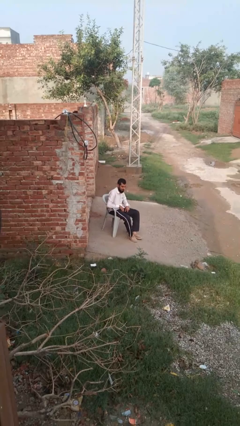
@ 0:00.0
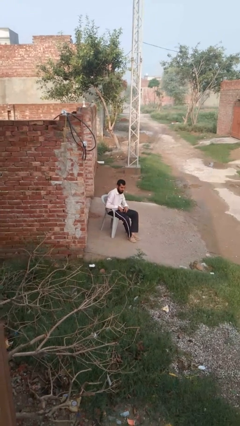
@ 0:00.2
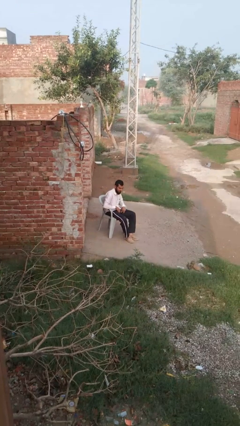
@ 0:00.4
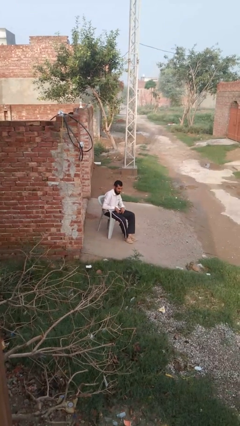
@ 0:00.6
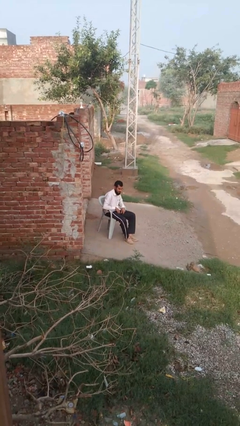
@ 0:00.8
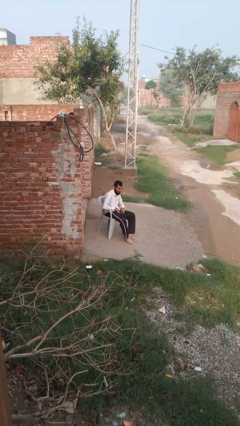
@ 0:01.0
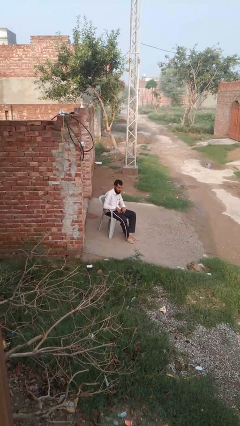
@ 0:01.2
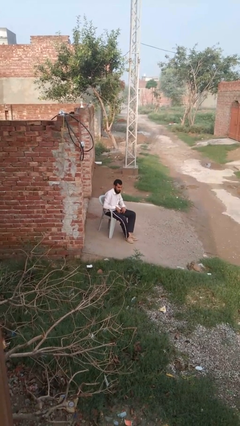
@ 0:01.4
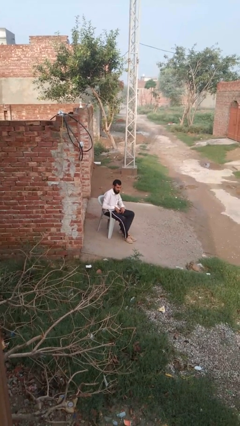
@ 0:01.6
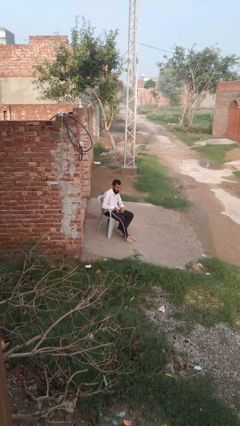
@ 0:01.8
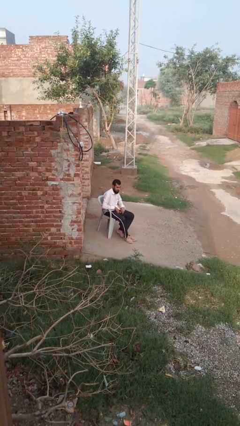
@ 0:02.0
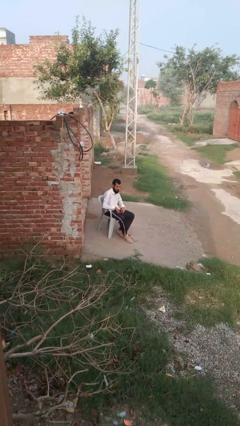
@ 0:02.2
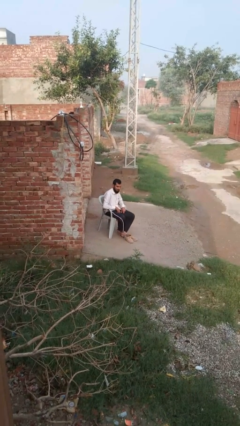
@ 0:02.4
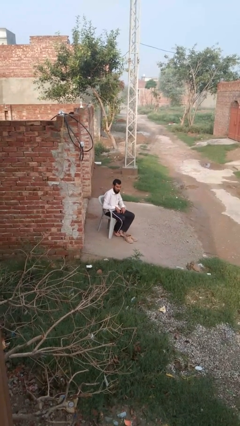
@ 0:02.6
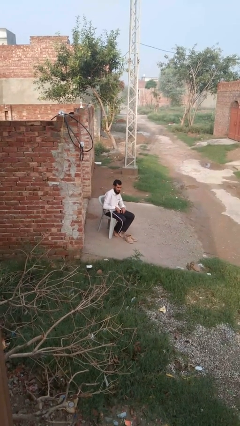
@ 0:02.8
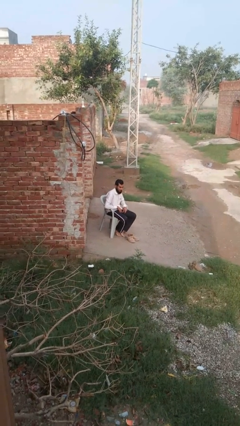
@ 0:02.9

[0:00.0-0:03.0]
person takes off shoes

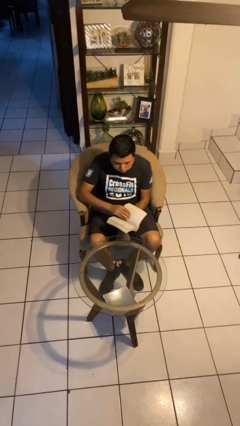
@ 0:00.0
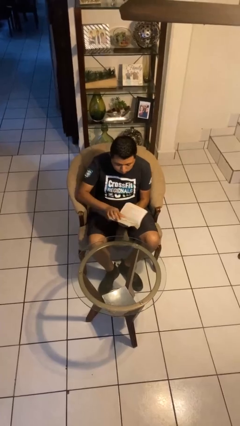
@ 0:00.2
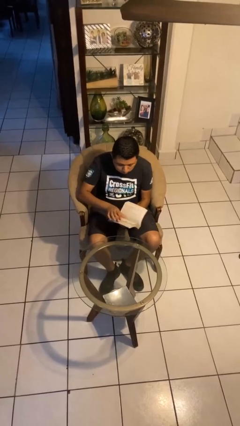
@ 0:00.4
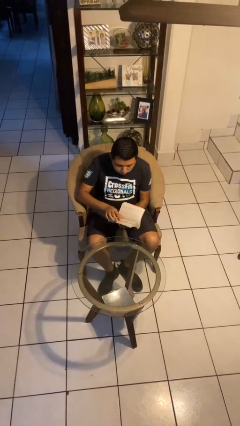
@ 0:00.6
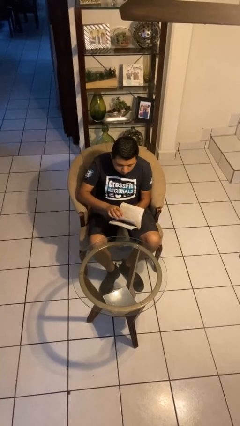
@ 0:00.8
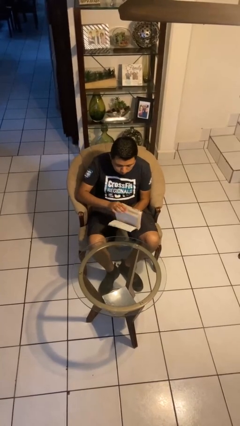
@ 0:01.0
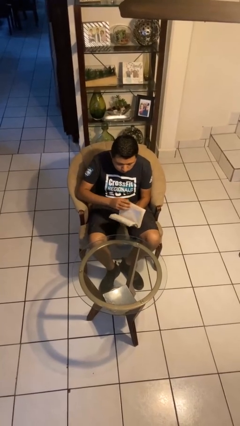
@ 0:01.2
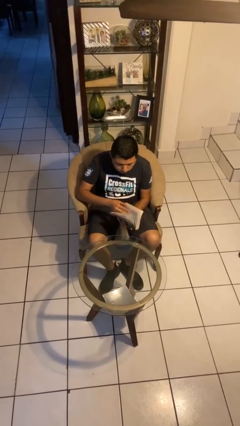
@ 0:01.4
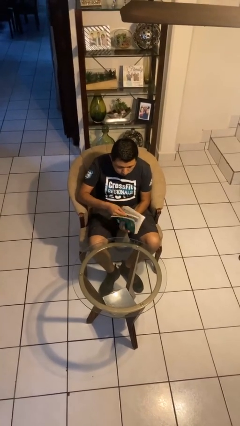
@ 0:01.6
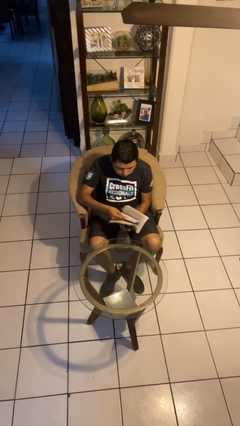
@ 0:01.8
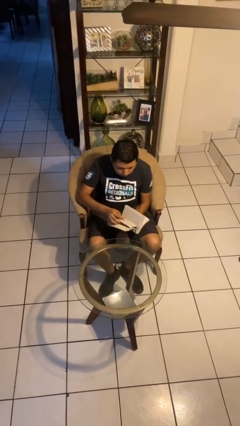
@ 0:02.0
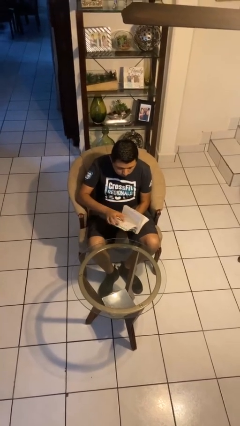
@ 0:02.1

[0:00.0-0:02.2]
person reads book

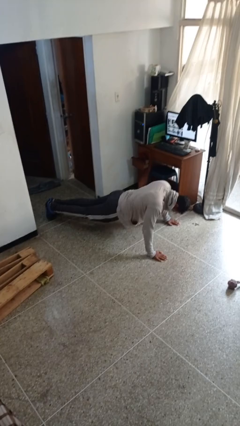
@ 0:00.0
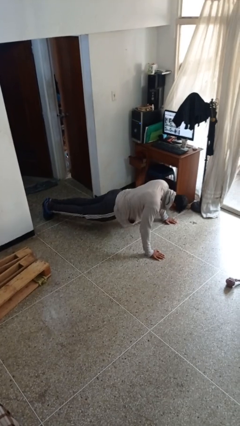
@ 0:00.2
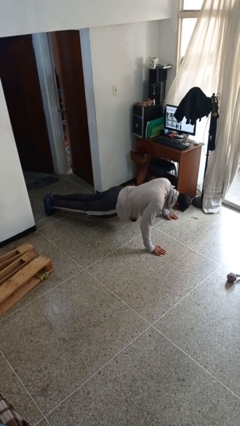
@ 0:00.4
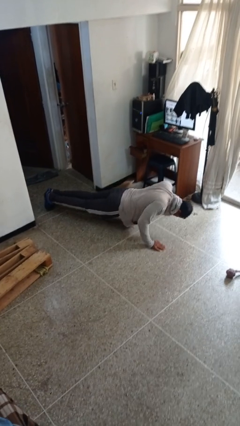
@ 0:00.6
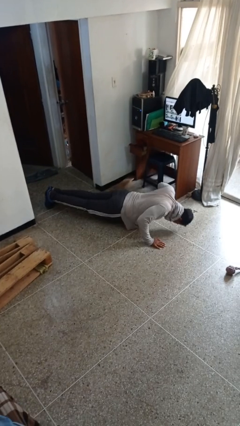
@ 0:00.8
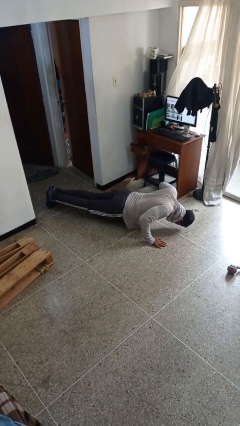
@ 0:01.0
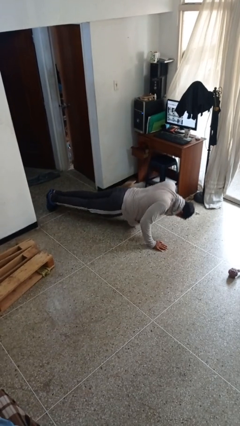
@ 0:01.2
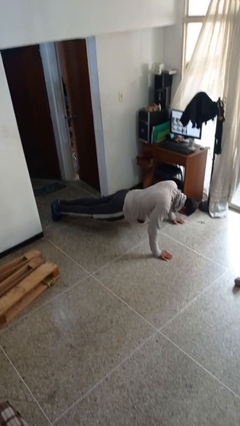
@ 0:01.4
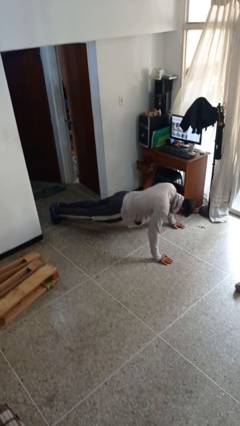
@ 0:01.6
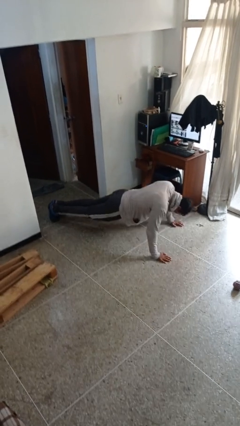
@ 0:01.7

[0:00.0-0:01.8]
person exercises with pushup

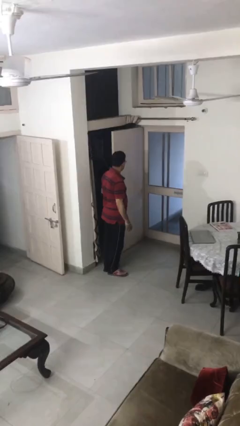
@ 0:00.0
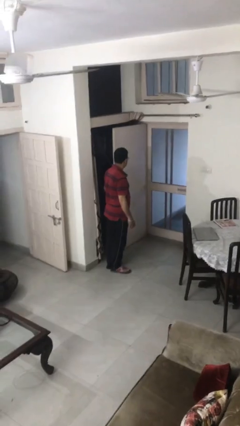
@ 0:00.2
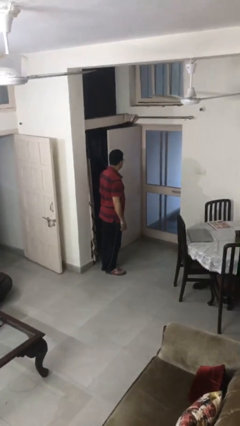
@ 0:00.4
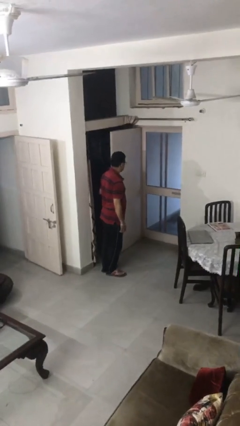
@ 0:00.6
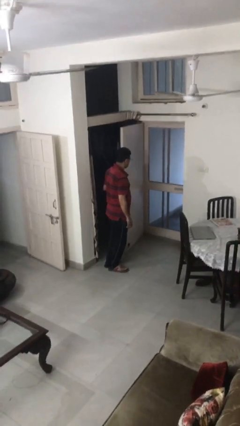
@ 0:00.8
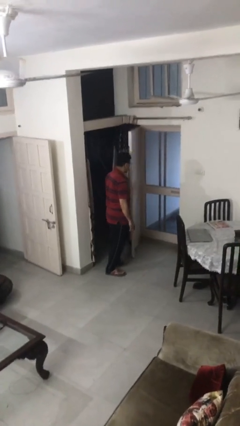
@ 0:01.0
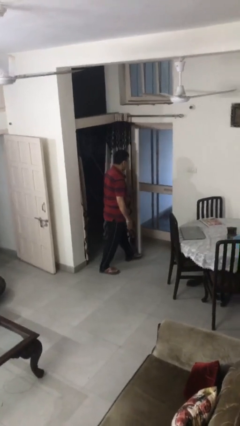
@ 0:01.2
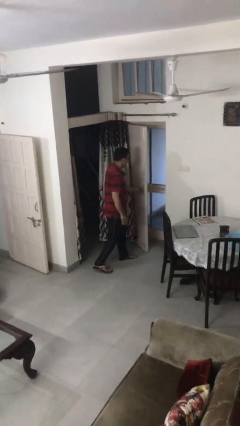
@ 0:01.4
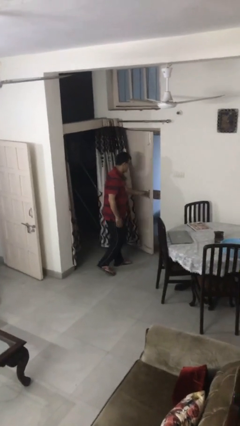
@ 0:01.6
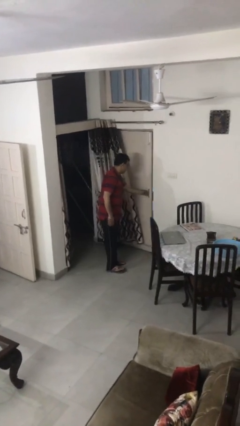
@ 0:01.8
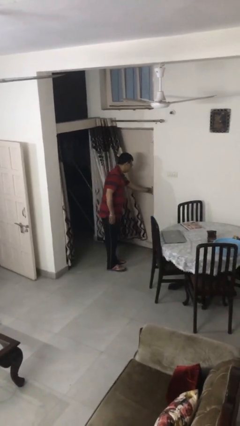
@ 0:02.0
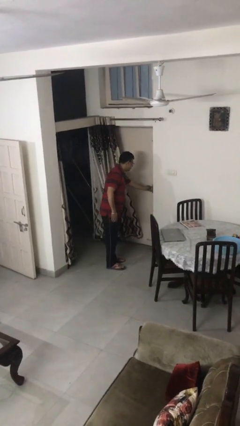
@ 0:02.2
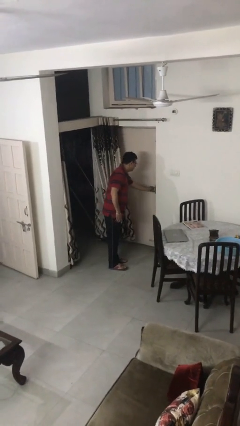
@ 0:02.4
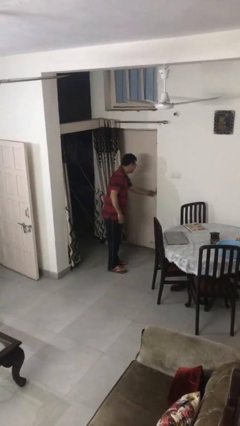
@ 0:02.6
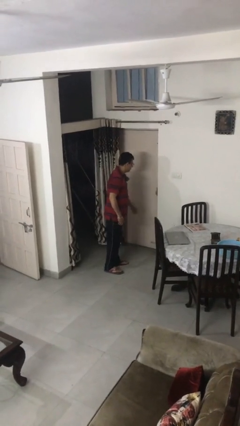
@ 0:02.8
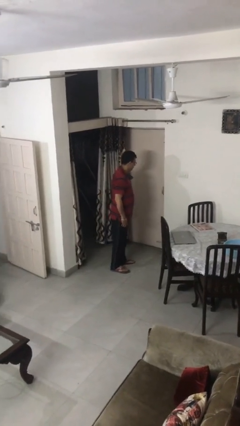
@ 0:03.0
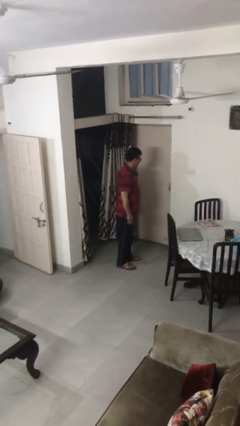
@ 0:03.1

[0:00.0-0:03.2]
person closes facility door

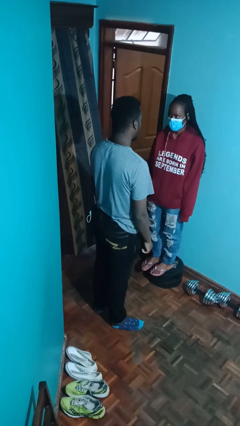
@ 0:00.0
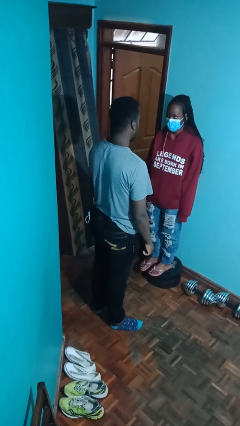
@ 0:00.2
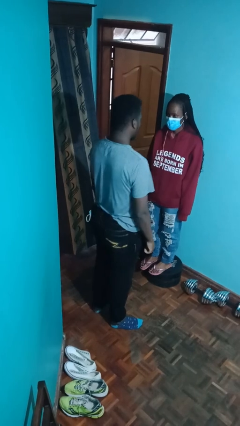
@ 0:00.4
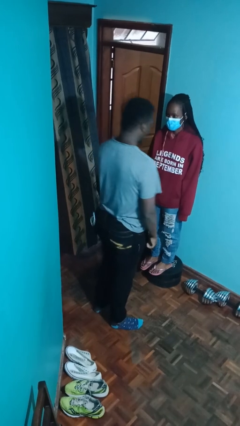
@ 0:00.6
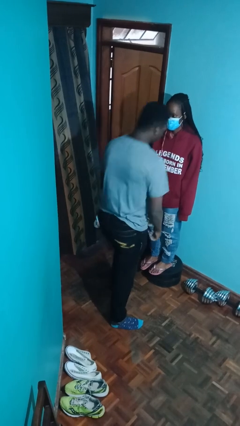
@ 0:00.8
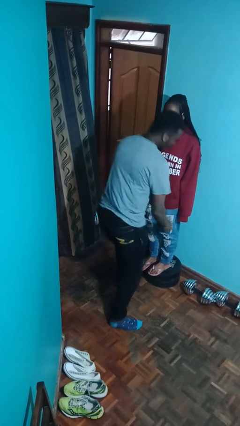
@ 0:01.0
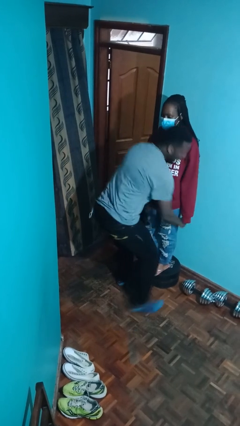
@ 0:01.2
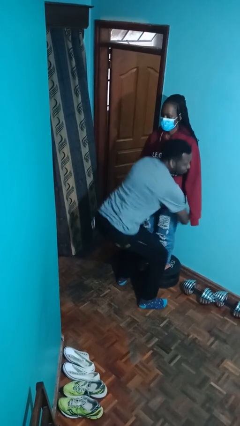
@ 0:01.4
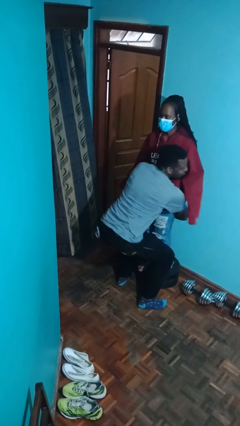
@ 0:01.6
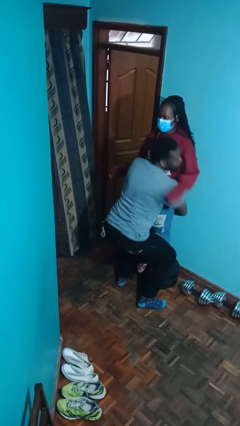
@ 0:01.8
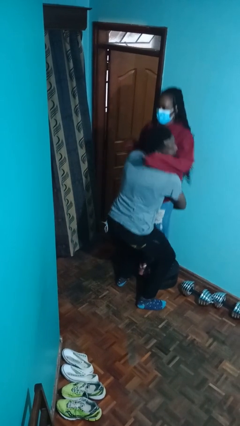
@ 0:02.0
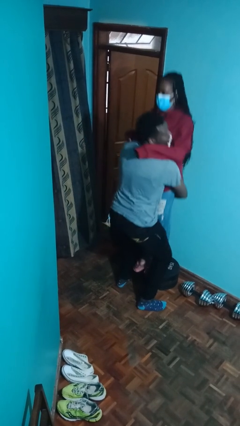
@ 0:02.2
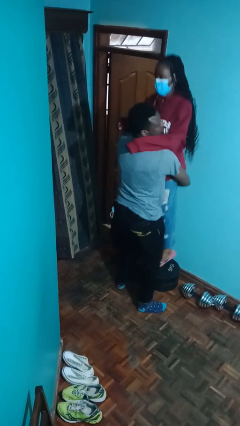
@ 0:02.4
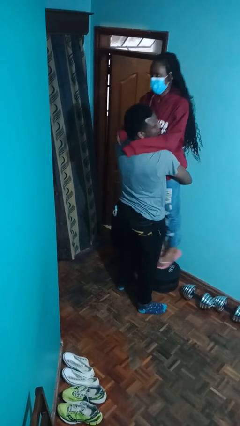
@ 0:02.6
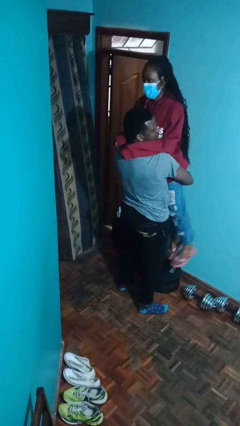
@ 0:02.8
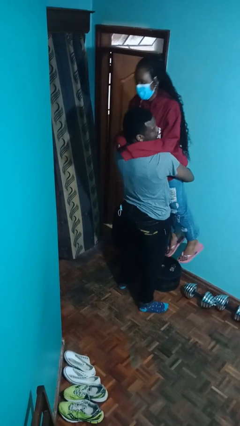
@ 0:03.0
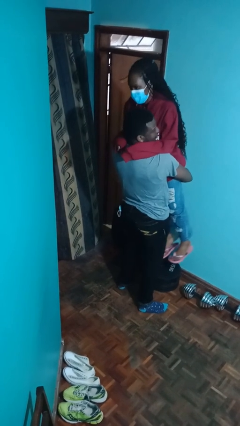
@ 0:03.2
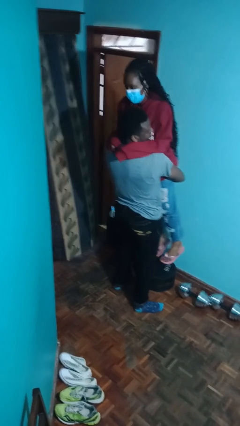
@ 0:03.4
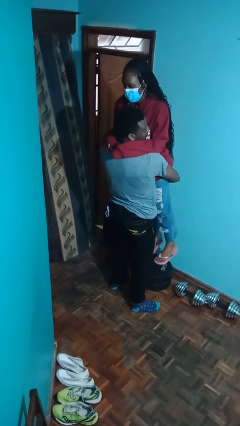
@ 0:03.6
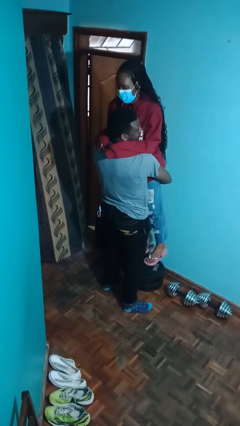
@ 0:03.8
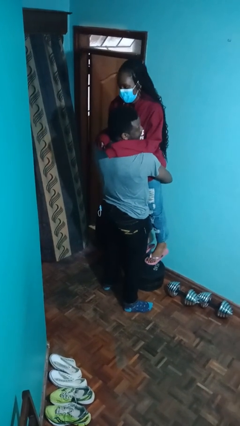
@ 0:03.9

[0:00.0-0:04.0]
person picks up person

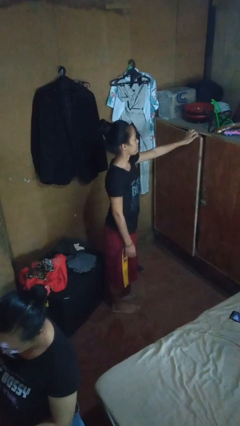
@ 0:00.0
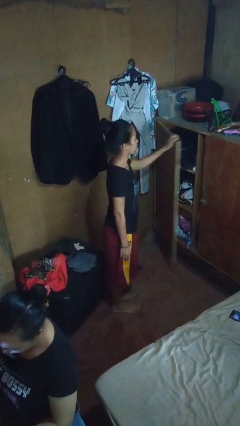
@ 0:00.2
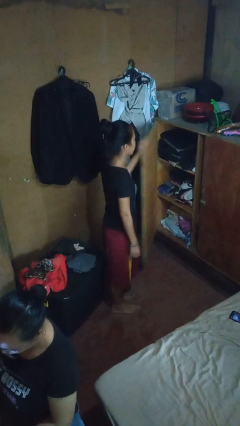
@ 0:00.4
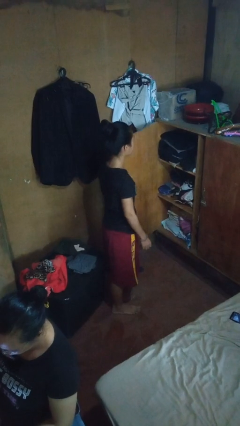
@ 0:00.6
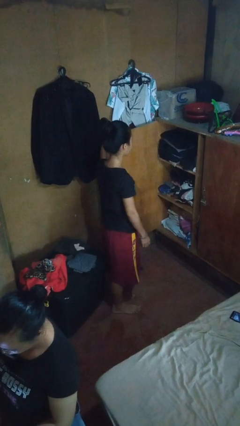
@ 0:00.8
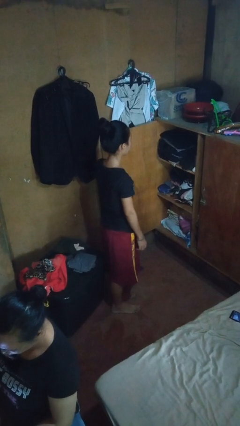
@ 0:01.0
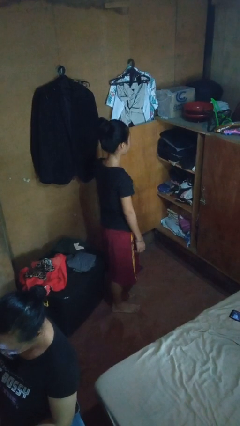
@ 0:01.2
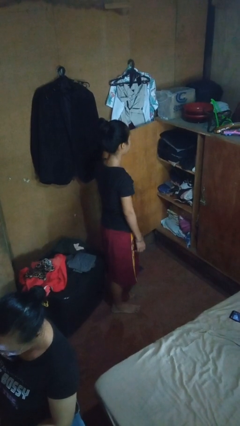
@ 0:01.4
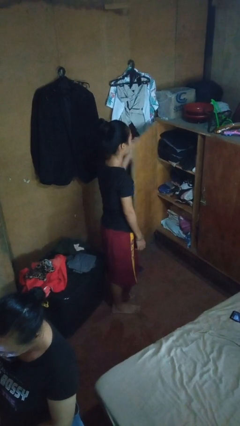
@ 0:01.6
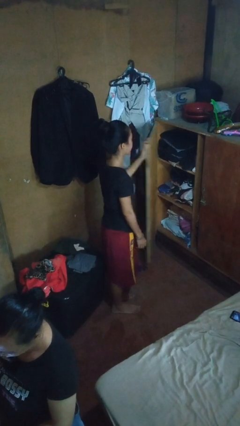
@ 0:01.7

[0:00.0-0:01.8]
person opens closet door

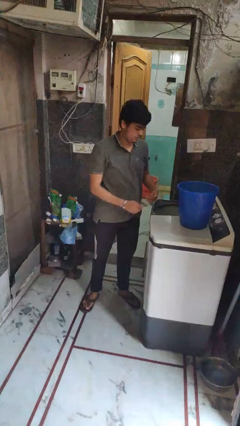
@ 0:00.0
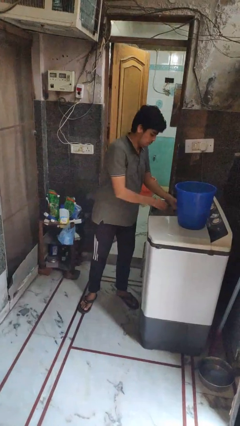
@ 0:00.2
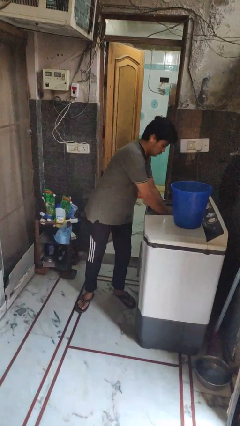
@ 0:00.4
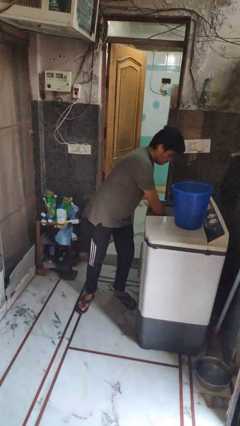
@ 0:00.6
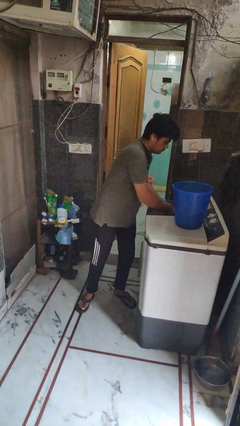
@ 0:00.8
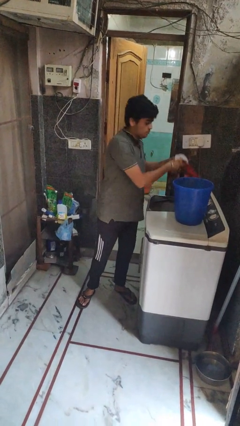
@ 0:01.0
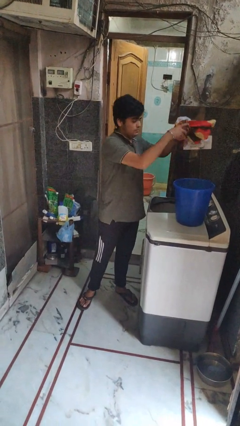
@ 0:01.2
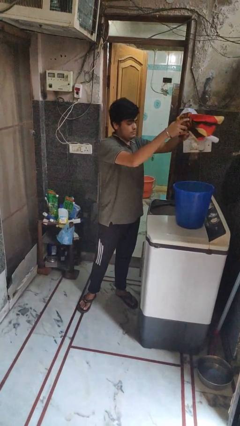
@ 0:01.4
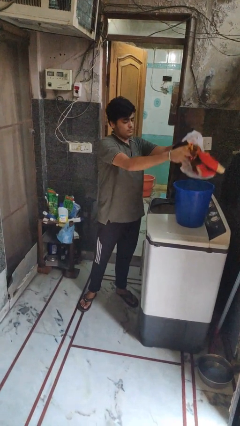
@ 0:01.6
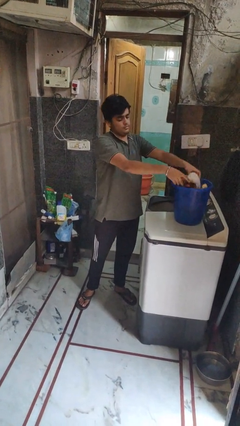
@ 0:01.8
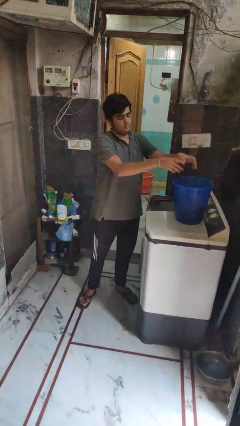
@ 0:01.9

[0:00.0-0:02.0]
person unloads clotheswasher
